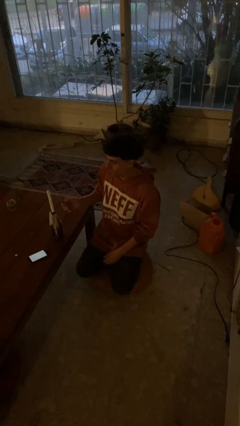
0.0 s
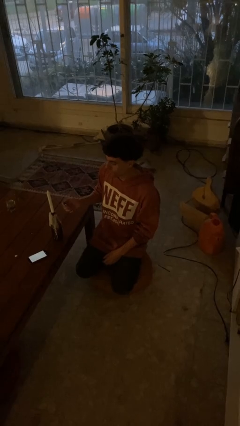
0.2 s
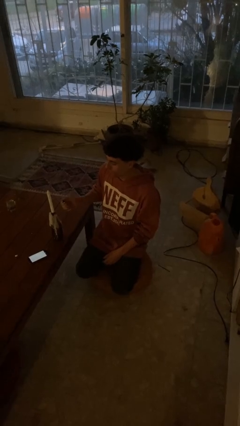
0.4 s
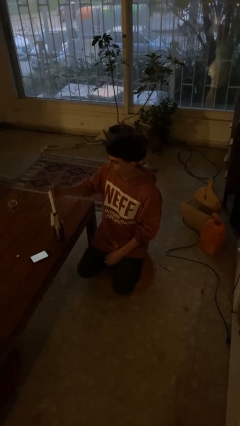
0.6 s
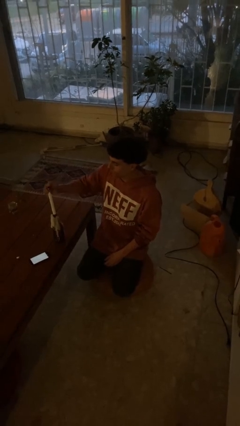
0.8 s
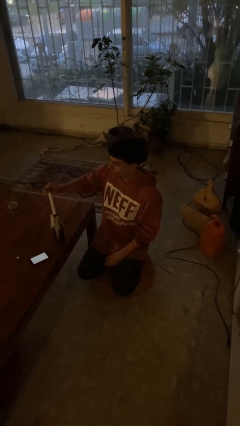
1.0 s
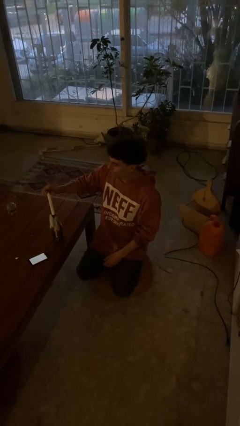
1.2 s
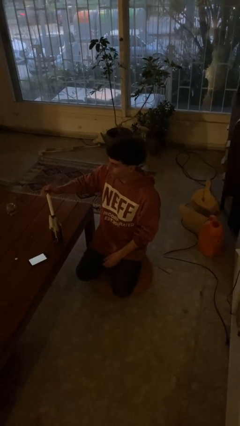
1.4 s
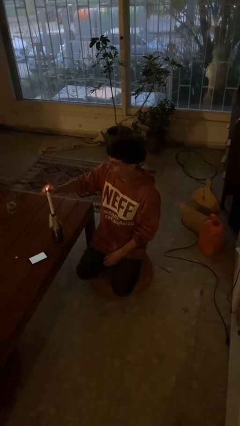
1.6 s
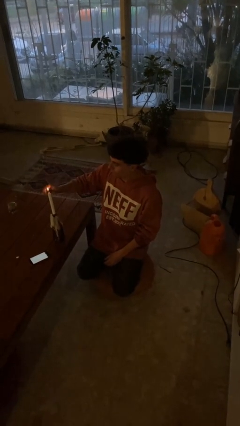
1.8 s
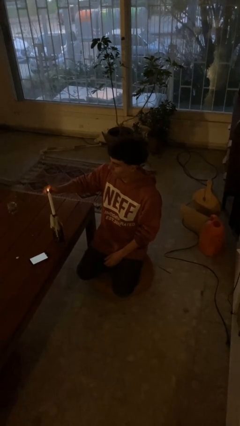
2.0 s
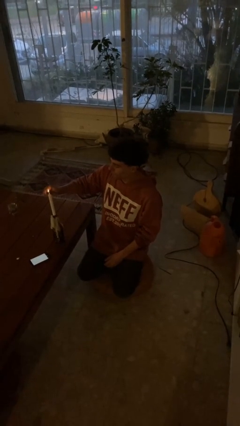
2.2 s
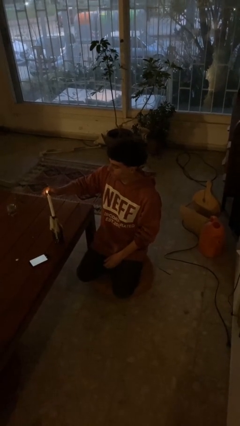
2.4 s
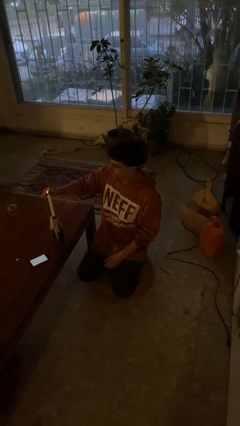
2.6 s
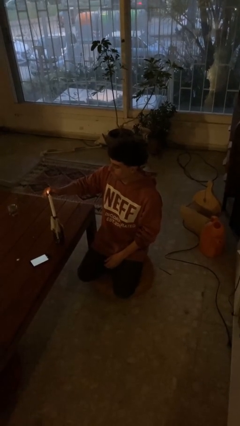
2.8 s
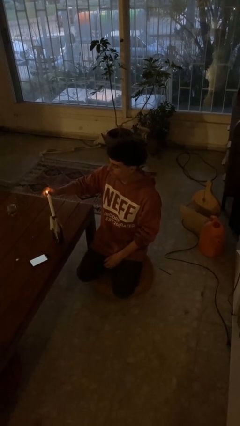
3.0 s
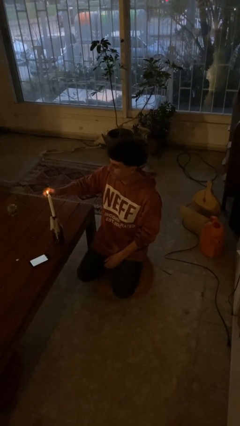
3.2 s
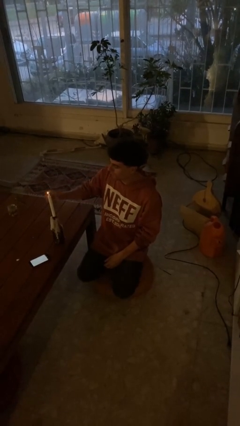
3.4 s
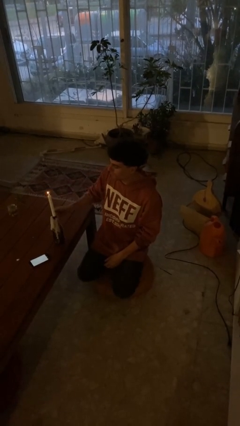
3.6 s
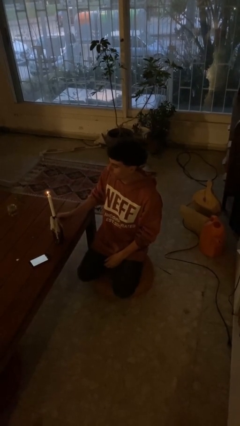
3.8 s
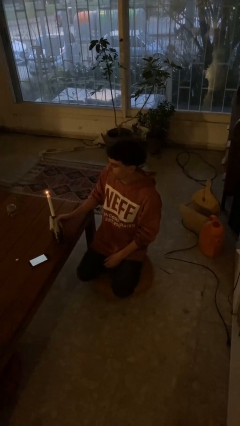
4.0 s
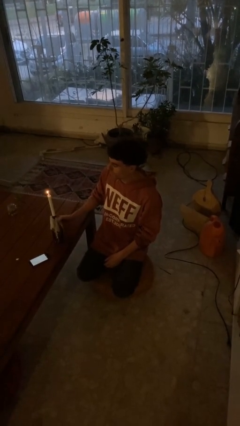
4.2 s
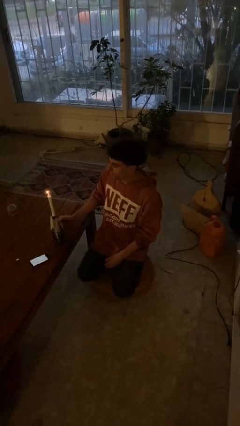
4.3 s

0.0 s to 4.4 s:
person lights candle

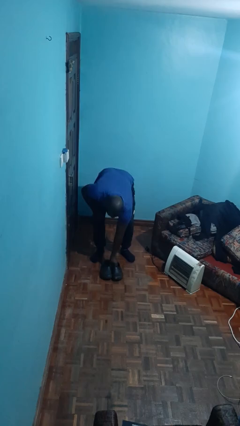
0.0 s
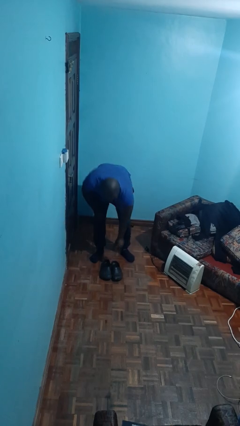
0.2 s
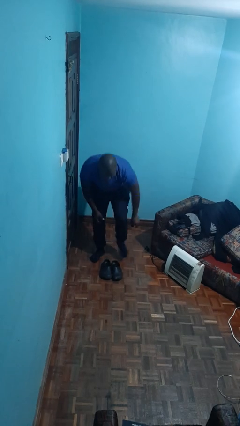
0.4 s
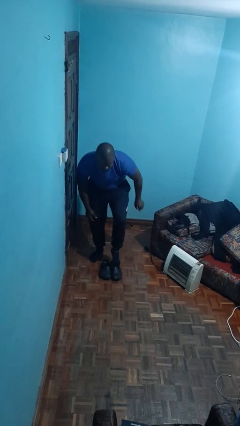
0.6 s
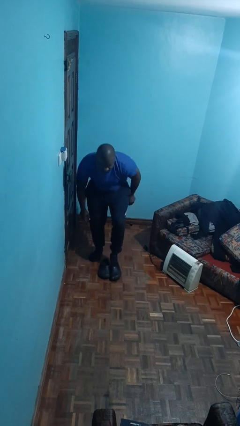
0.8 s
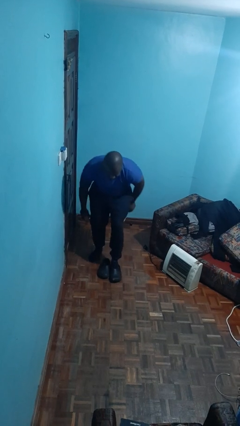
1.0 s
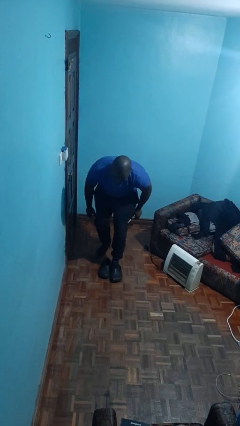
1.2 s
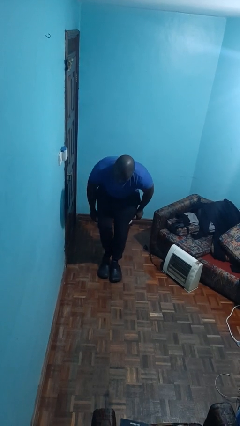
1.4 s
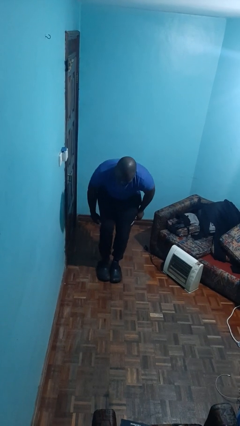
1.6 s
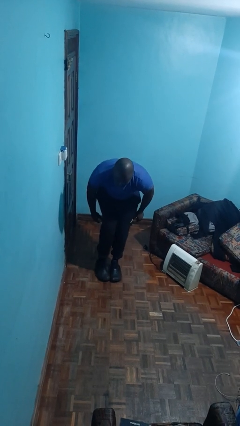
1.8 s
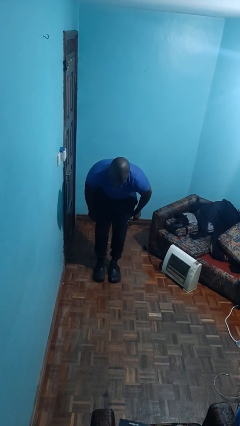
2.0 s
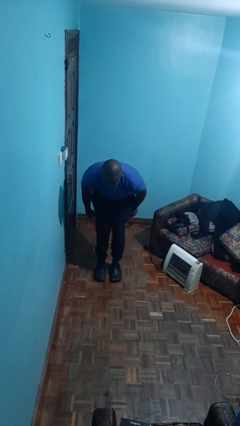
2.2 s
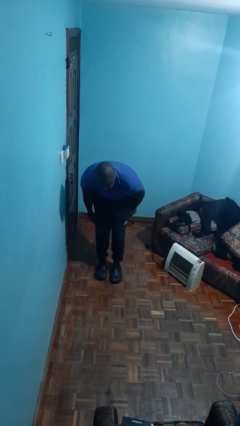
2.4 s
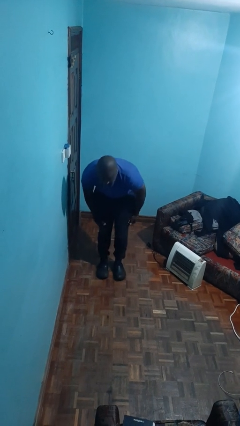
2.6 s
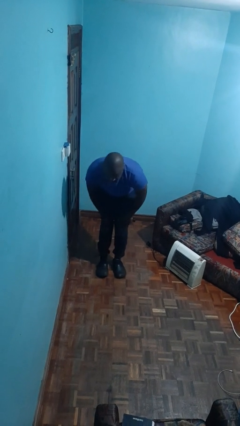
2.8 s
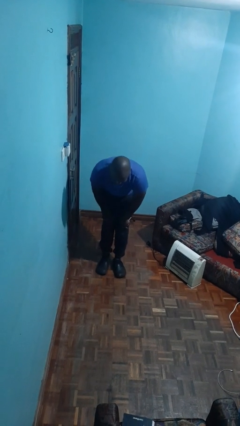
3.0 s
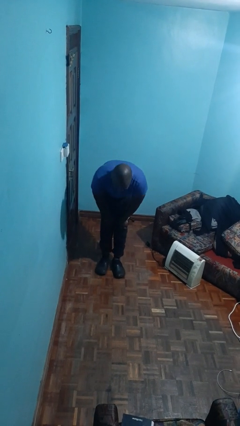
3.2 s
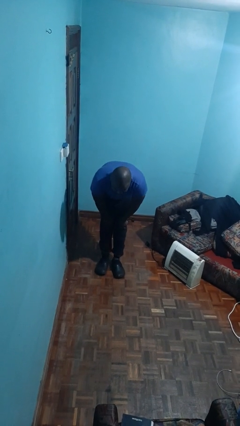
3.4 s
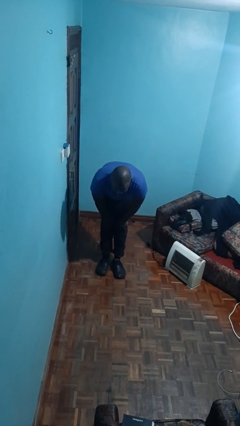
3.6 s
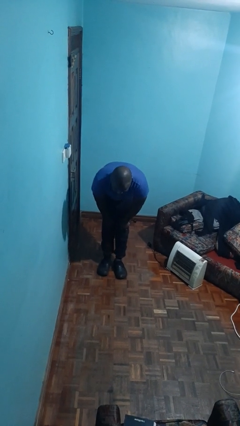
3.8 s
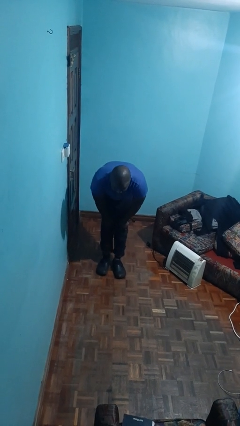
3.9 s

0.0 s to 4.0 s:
person puts on shoes

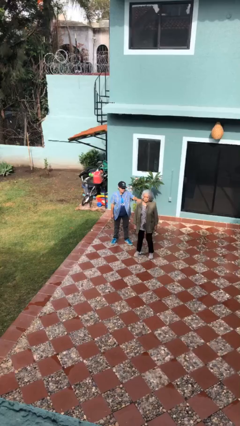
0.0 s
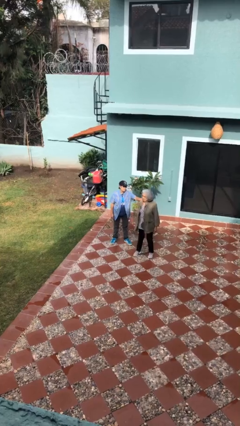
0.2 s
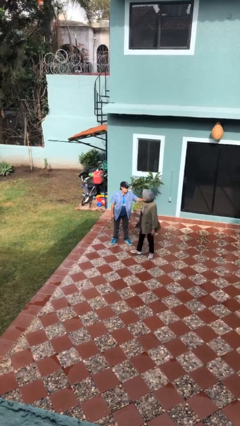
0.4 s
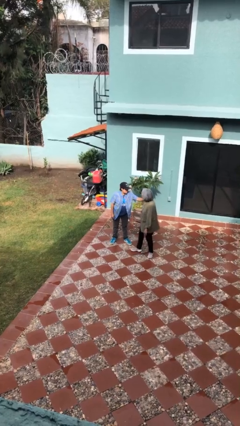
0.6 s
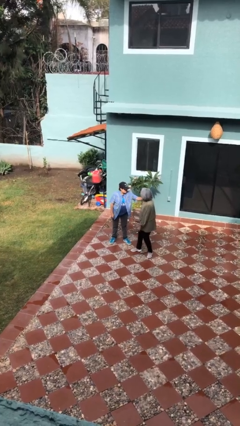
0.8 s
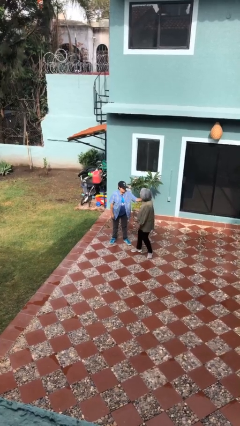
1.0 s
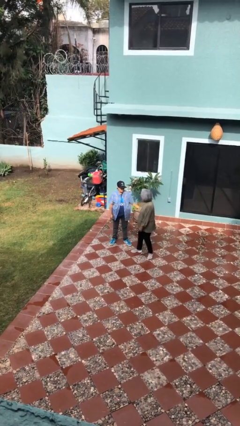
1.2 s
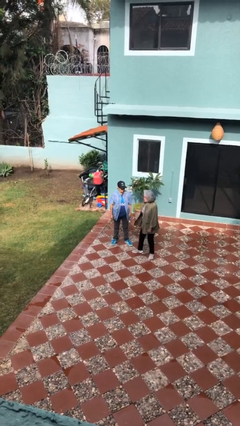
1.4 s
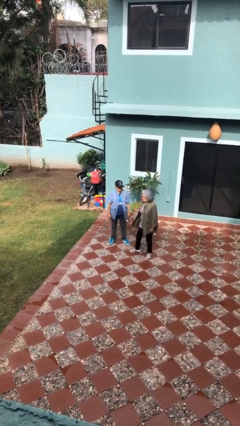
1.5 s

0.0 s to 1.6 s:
person spins person around

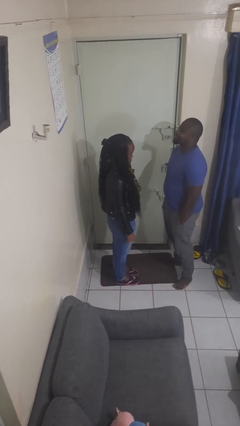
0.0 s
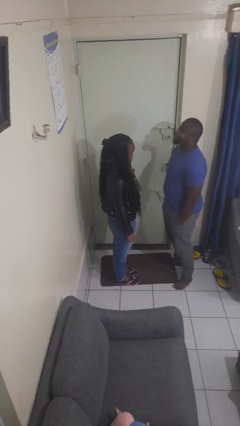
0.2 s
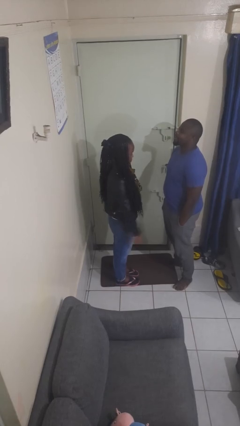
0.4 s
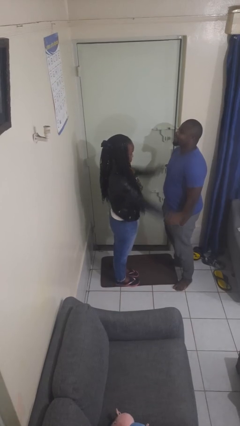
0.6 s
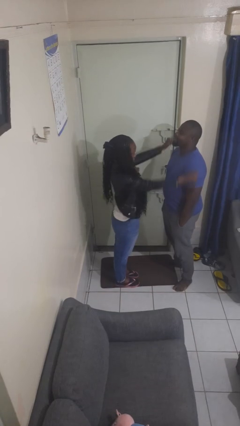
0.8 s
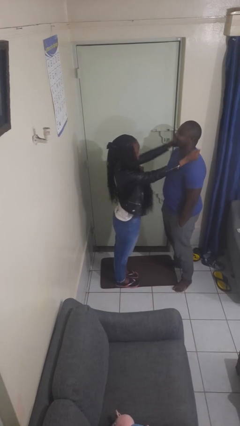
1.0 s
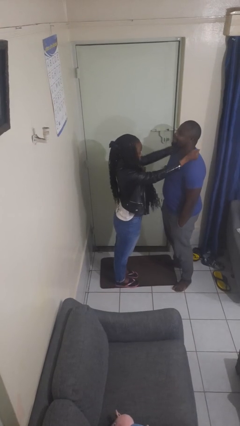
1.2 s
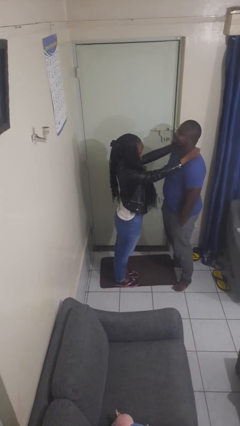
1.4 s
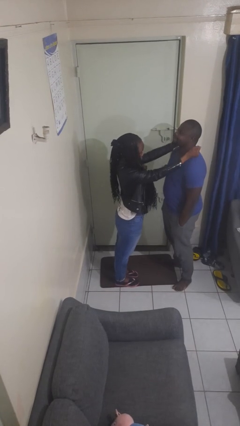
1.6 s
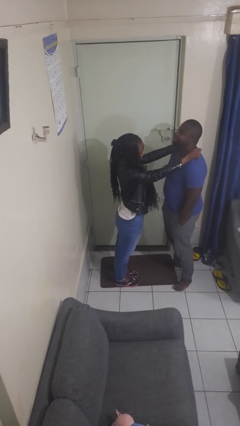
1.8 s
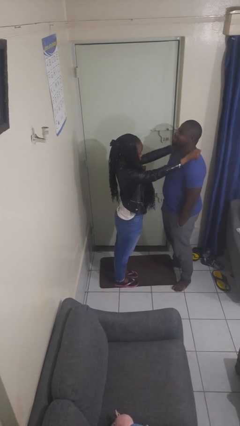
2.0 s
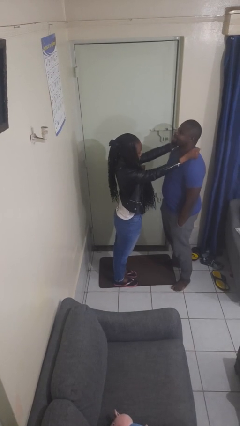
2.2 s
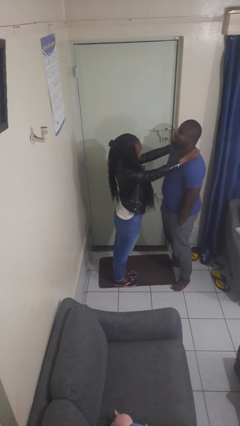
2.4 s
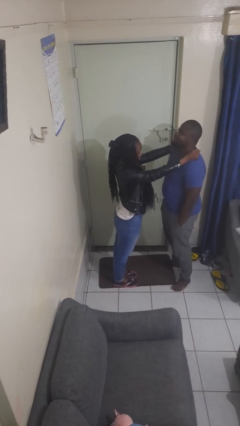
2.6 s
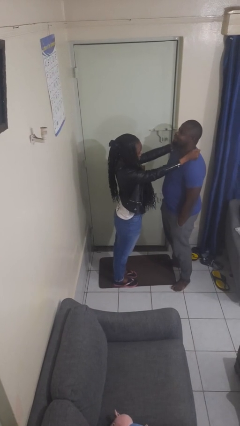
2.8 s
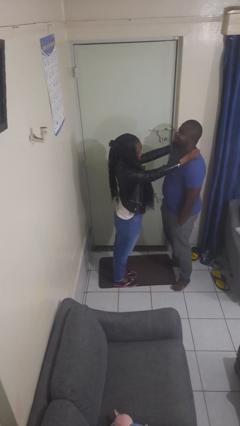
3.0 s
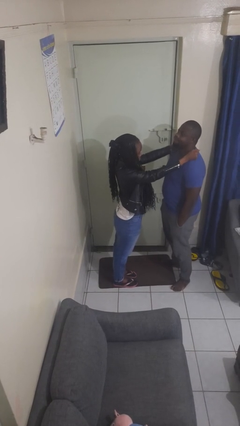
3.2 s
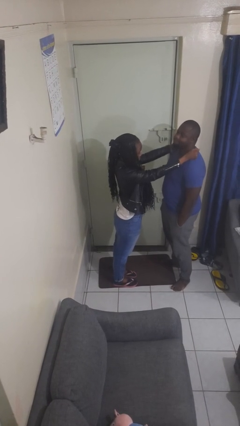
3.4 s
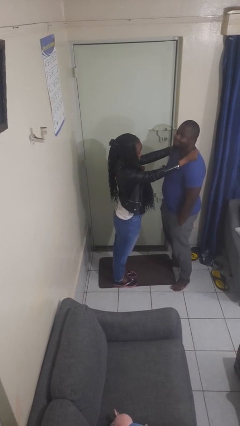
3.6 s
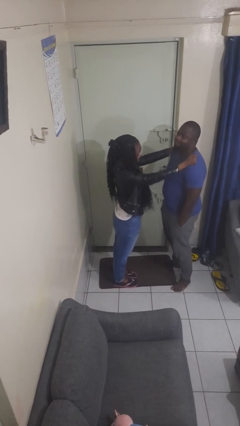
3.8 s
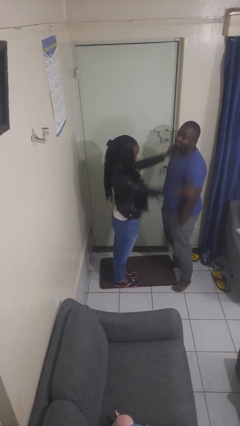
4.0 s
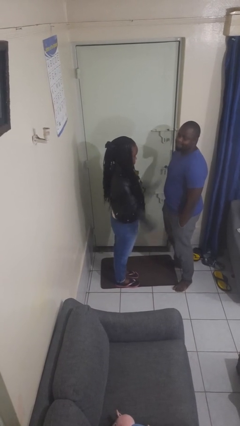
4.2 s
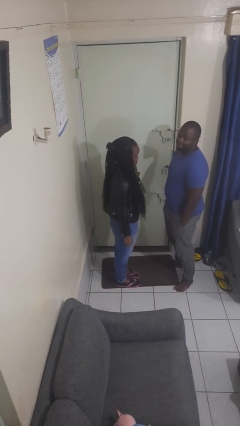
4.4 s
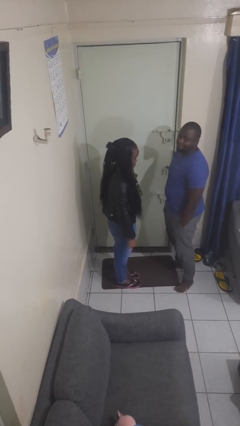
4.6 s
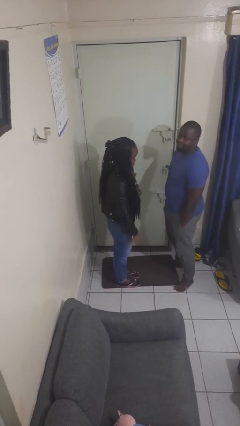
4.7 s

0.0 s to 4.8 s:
person pounds shoulders of person

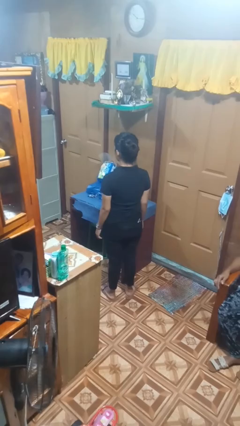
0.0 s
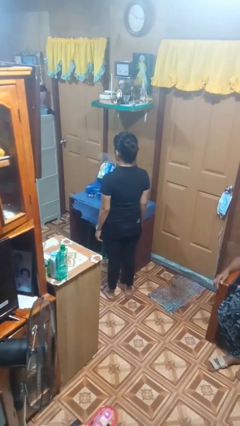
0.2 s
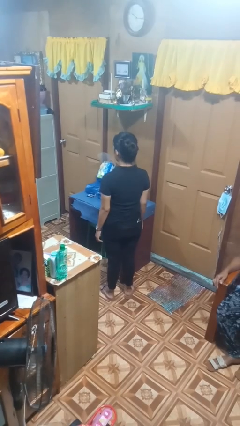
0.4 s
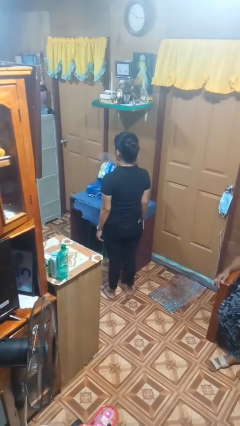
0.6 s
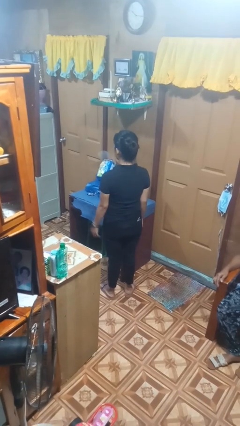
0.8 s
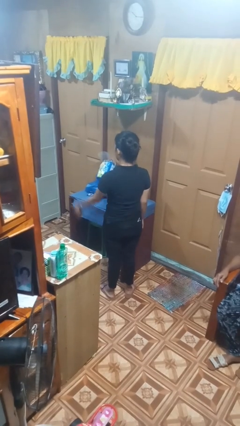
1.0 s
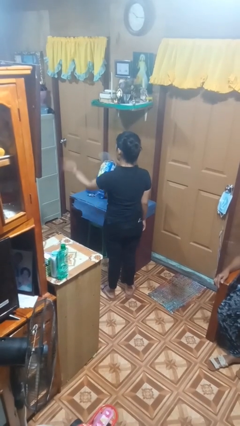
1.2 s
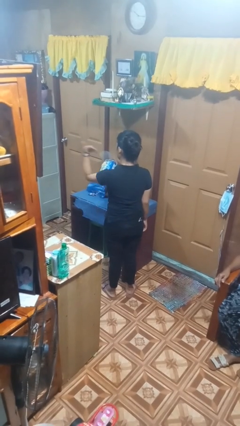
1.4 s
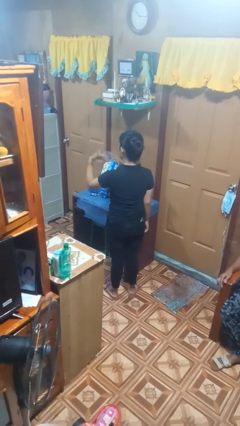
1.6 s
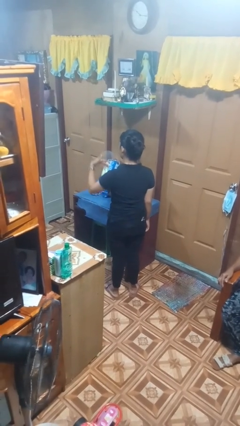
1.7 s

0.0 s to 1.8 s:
person gestures come here

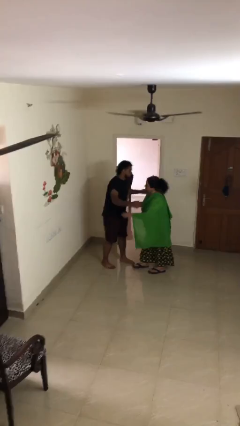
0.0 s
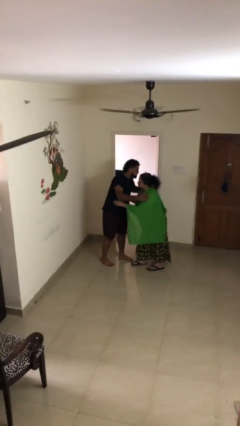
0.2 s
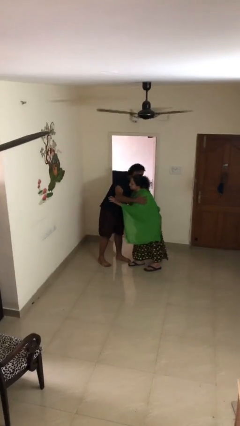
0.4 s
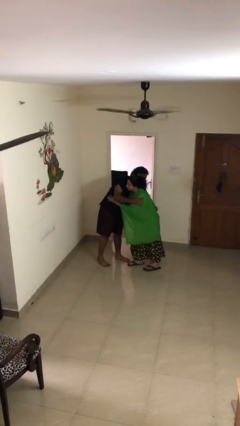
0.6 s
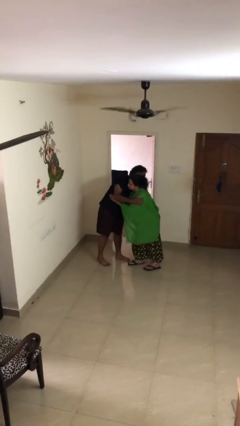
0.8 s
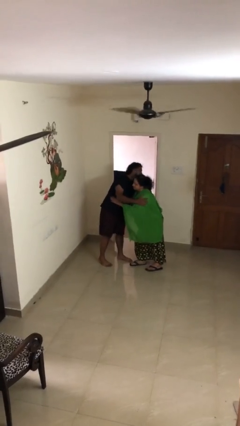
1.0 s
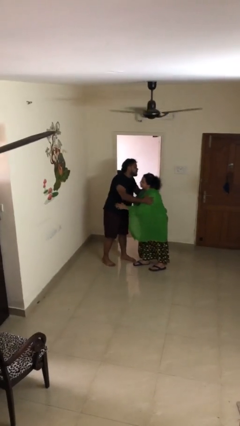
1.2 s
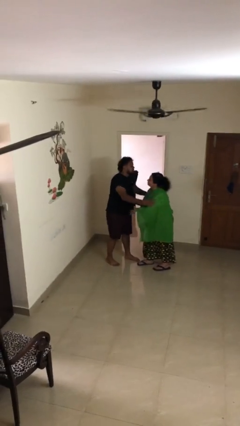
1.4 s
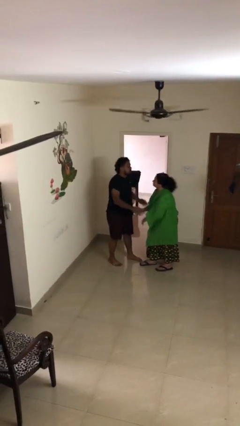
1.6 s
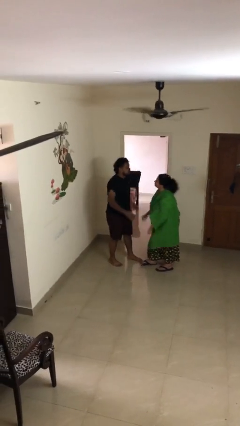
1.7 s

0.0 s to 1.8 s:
person embraces person
